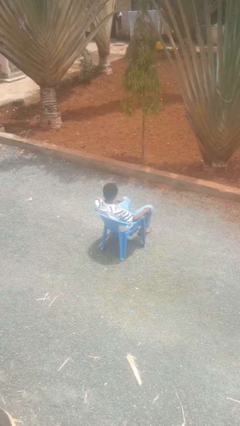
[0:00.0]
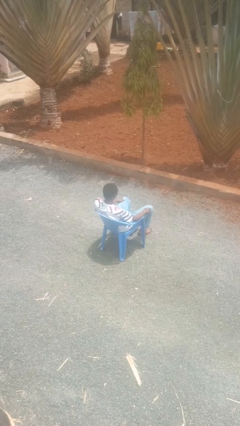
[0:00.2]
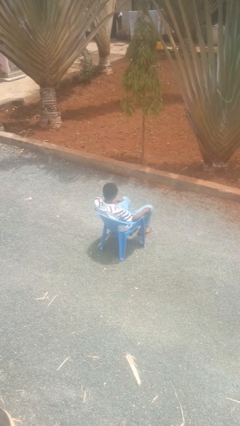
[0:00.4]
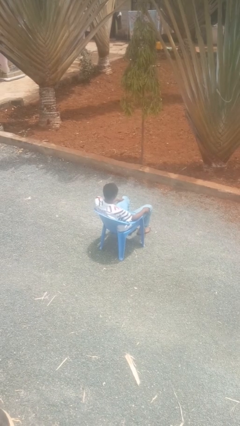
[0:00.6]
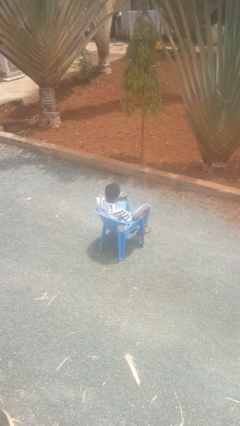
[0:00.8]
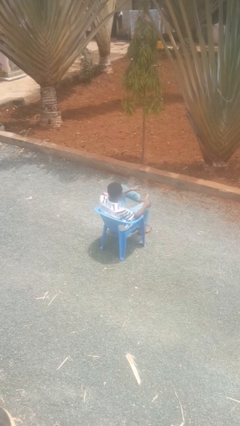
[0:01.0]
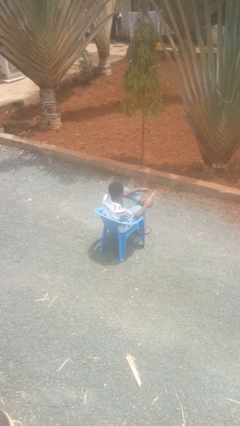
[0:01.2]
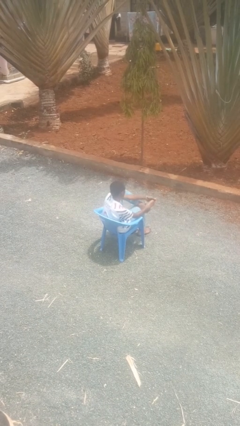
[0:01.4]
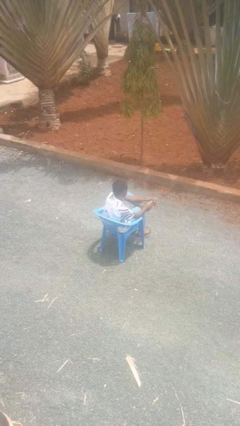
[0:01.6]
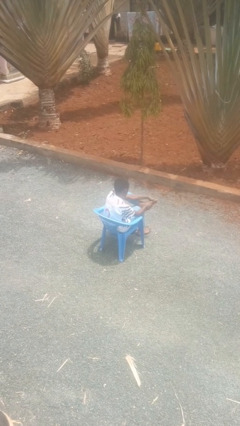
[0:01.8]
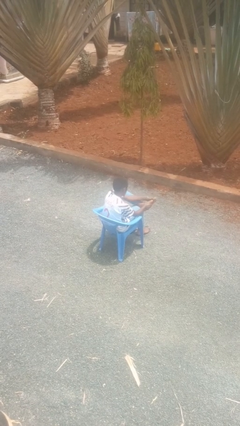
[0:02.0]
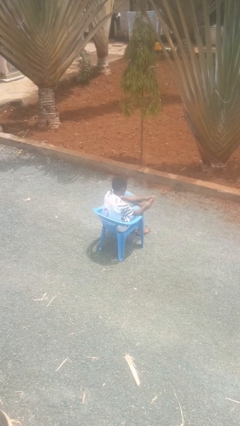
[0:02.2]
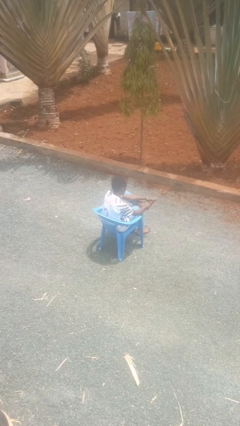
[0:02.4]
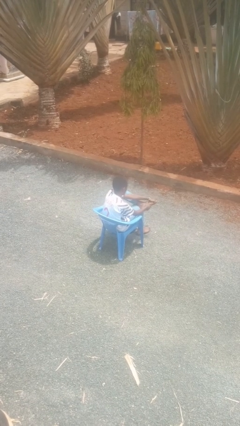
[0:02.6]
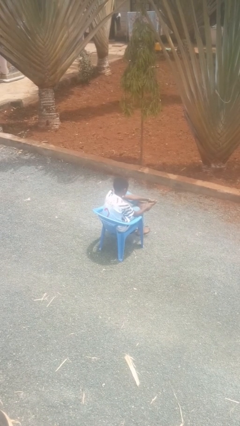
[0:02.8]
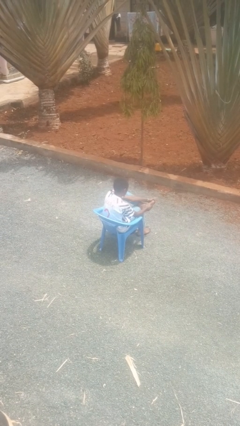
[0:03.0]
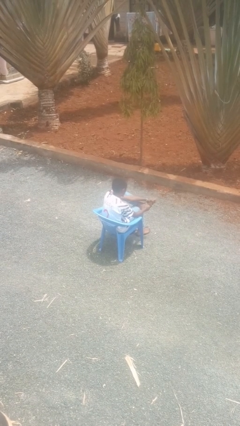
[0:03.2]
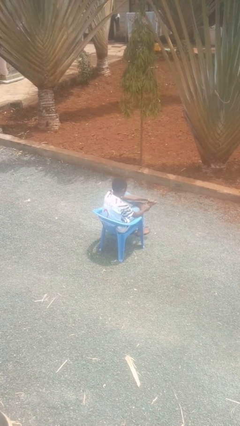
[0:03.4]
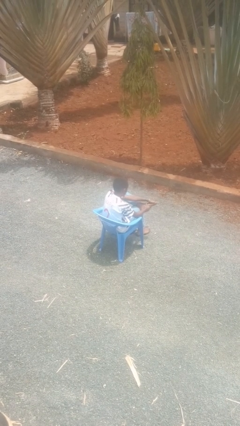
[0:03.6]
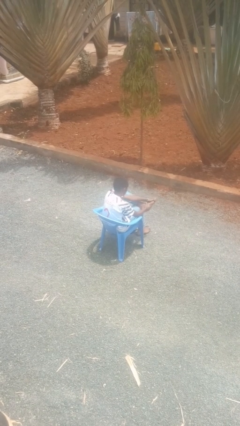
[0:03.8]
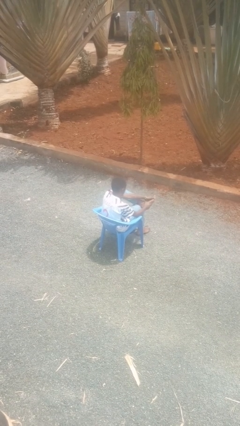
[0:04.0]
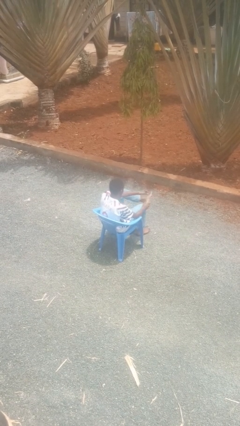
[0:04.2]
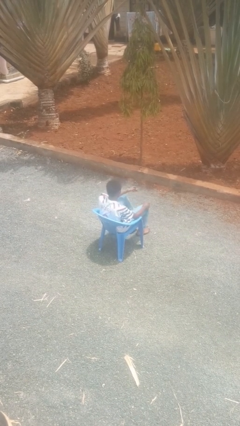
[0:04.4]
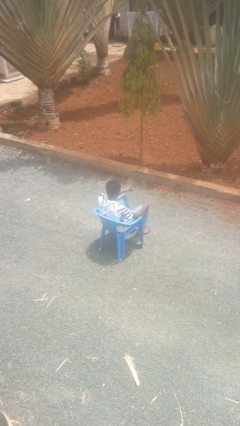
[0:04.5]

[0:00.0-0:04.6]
person rubs foot

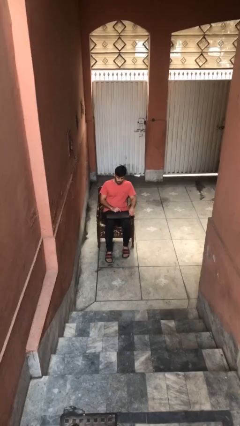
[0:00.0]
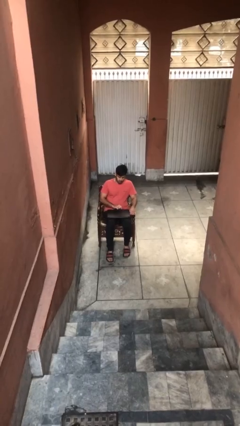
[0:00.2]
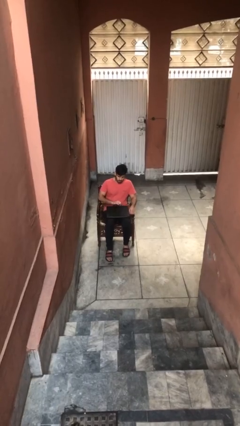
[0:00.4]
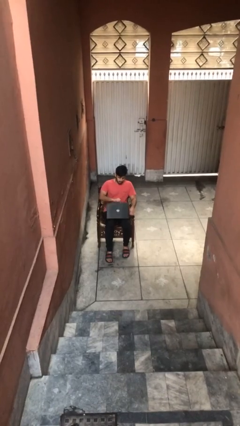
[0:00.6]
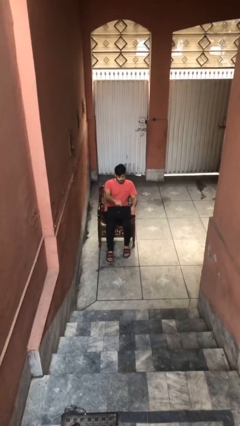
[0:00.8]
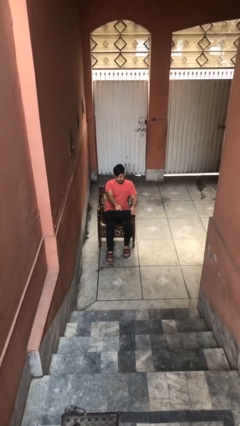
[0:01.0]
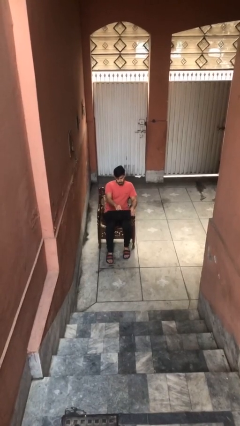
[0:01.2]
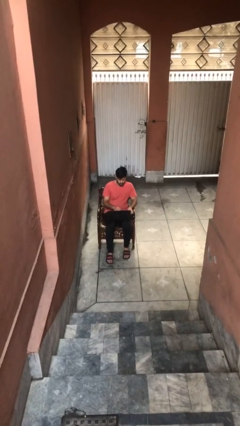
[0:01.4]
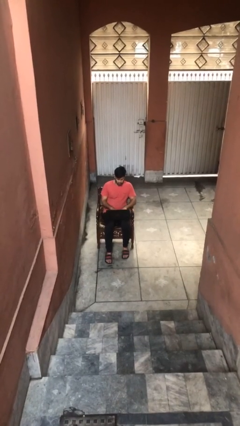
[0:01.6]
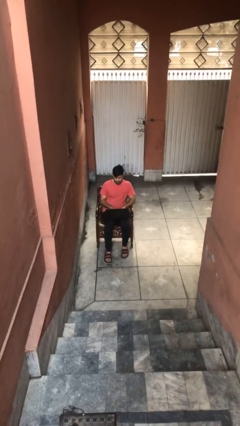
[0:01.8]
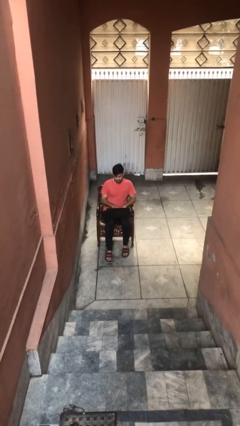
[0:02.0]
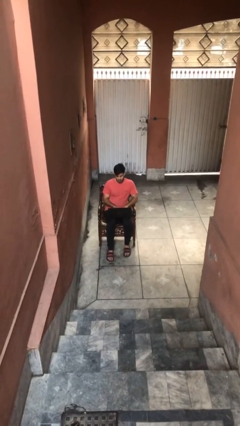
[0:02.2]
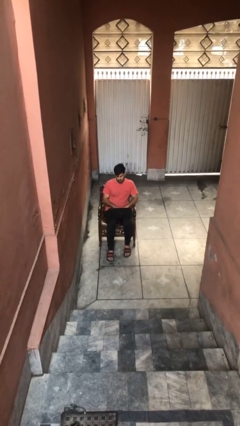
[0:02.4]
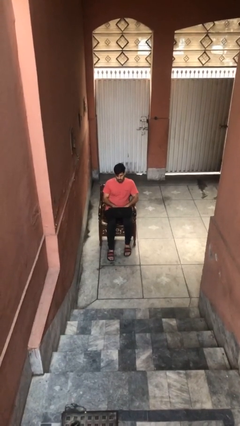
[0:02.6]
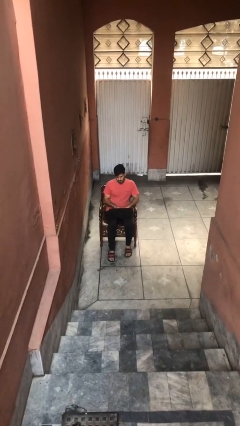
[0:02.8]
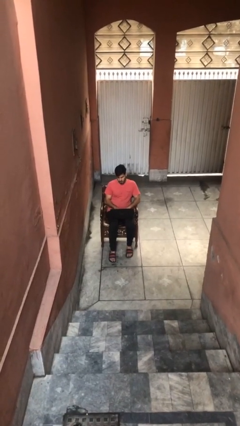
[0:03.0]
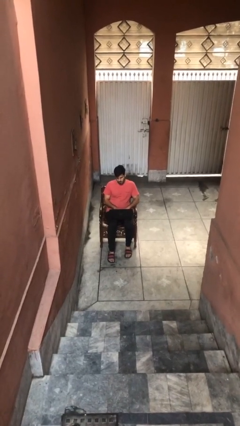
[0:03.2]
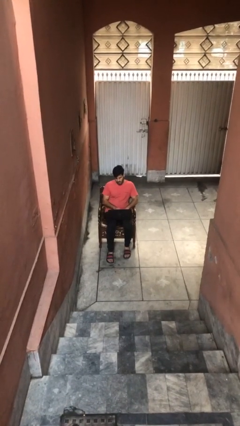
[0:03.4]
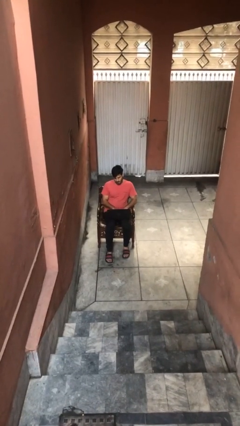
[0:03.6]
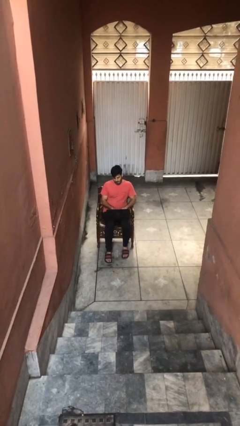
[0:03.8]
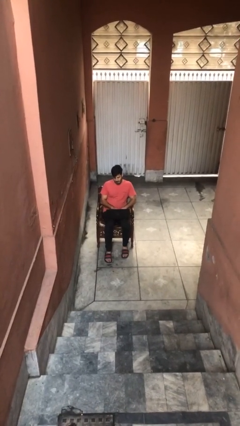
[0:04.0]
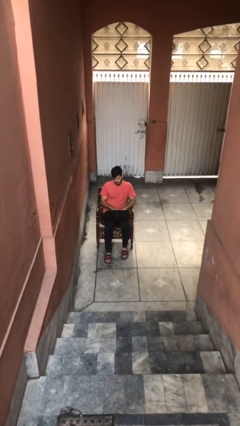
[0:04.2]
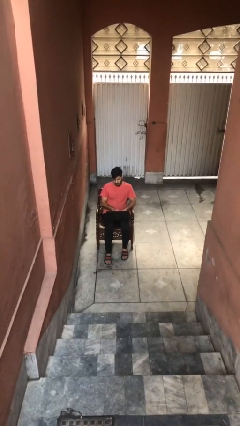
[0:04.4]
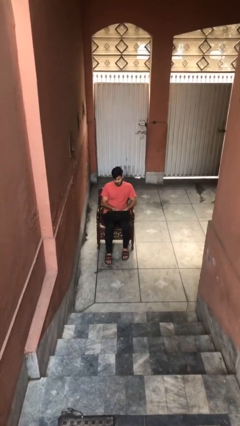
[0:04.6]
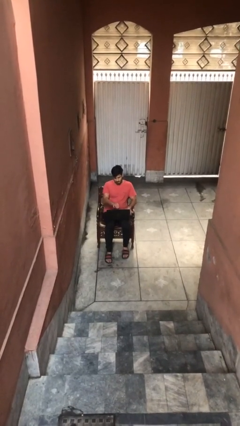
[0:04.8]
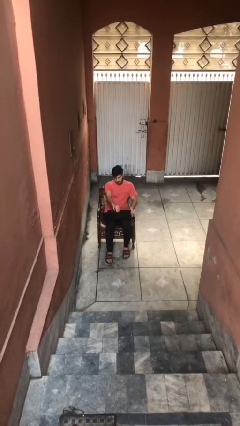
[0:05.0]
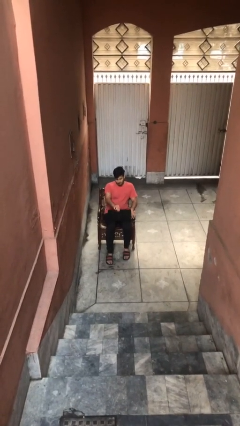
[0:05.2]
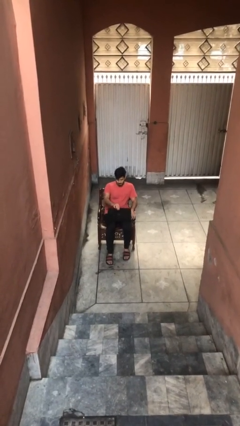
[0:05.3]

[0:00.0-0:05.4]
person interacts with laptop

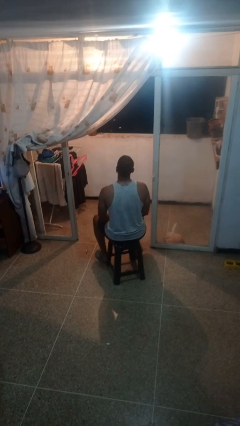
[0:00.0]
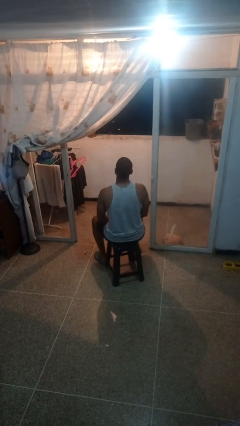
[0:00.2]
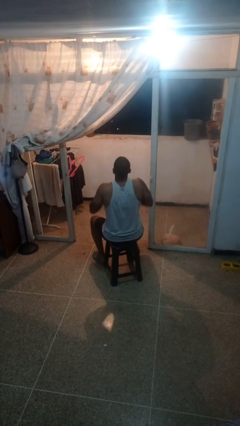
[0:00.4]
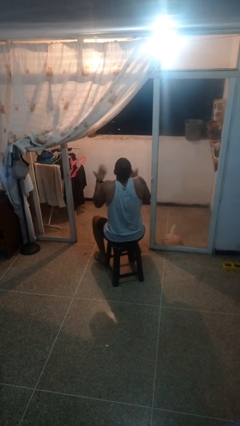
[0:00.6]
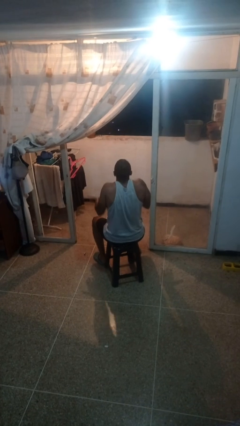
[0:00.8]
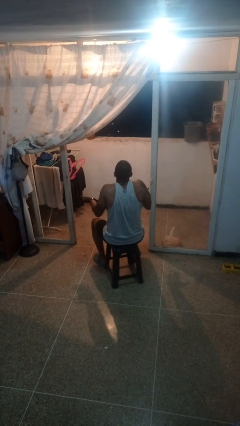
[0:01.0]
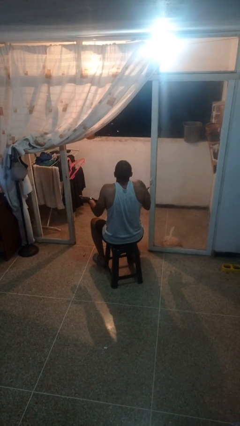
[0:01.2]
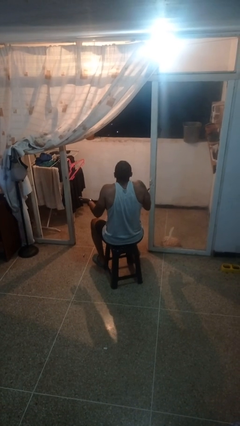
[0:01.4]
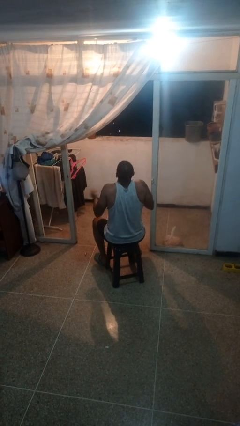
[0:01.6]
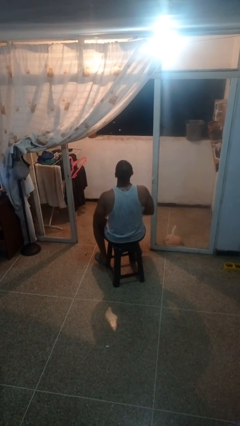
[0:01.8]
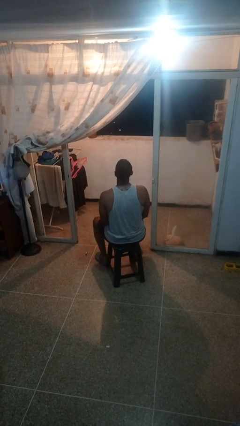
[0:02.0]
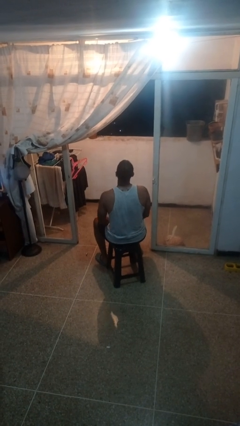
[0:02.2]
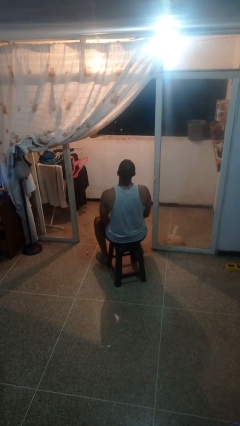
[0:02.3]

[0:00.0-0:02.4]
person shrugs

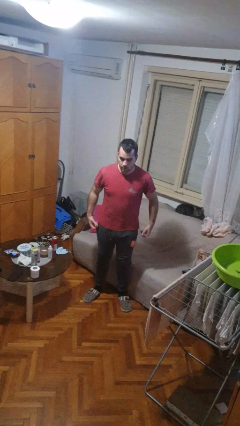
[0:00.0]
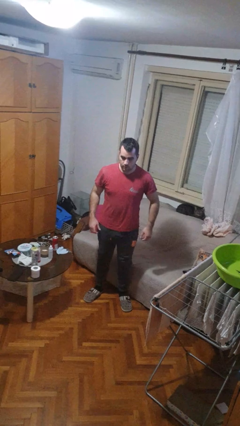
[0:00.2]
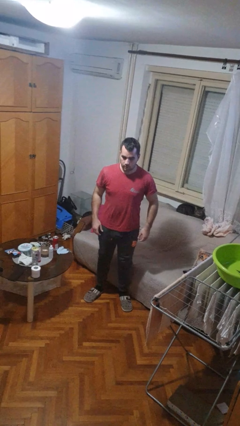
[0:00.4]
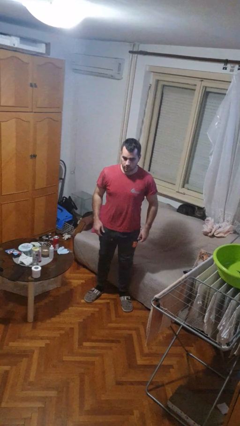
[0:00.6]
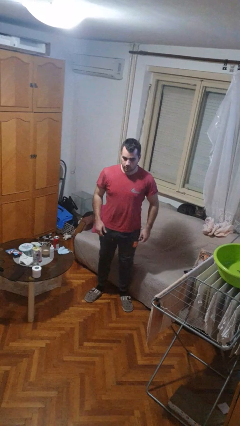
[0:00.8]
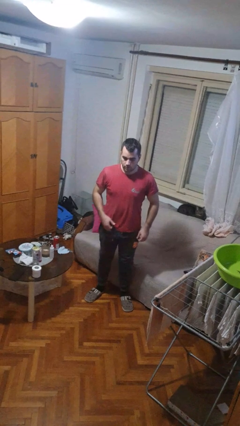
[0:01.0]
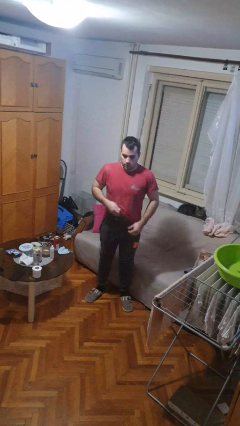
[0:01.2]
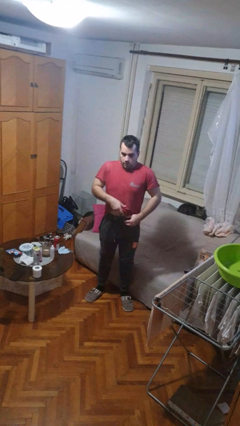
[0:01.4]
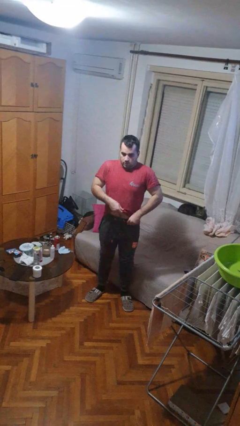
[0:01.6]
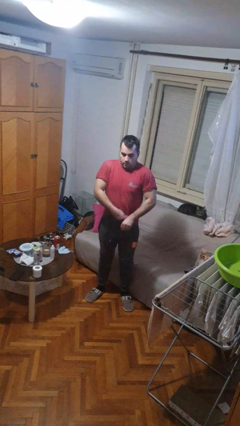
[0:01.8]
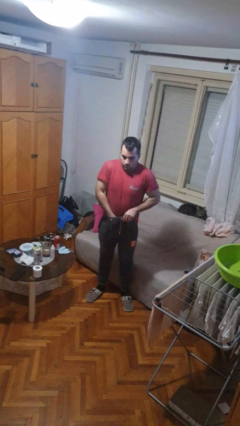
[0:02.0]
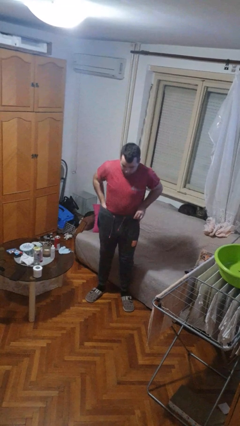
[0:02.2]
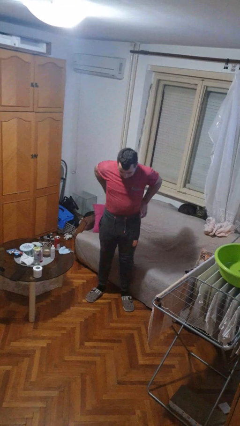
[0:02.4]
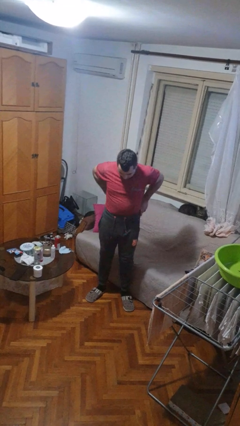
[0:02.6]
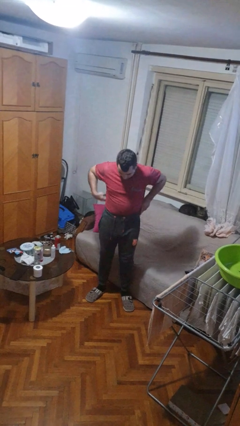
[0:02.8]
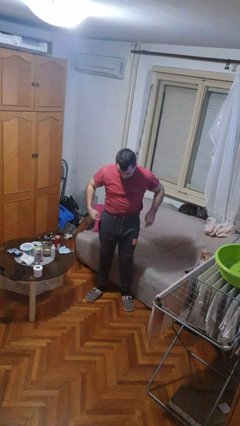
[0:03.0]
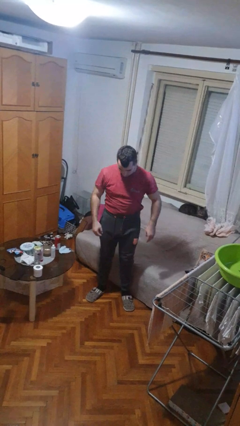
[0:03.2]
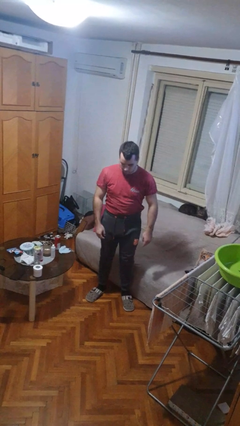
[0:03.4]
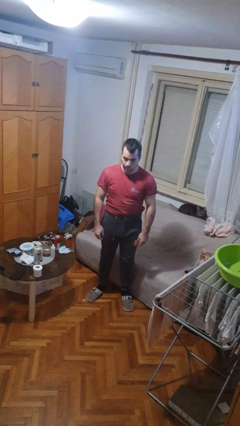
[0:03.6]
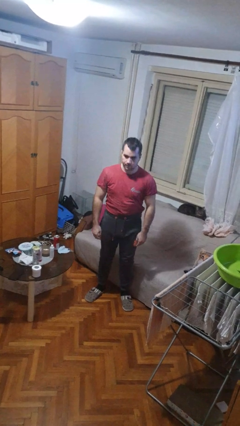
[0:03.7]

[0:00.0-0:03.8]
person tucks in shirt

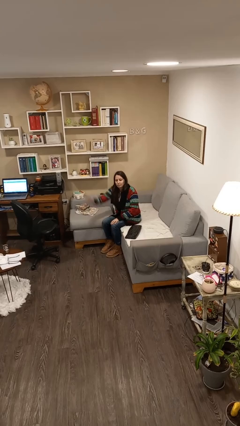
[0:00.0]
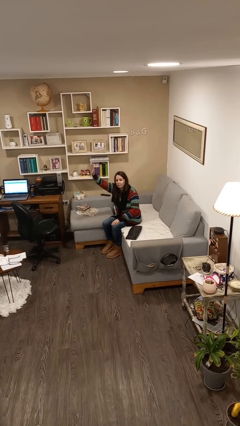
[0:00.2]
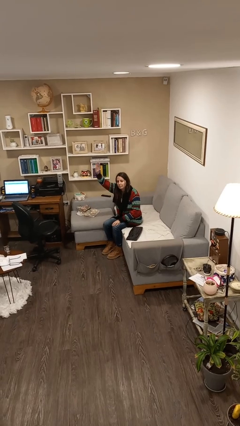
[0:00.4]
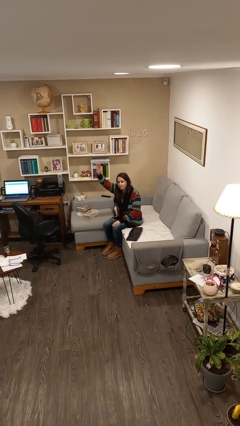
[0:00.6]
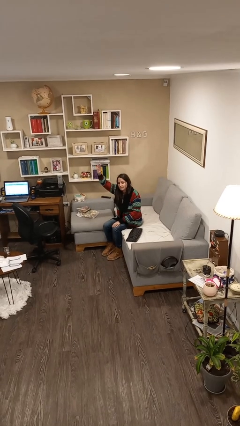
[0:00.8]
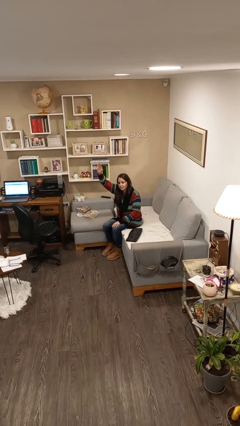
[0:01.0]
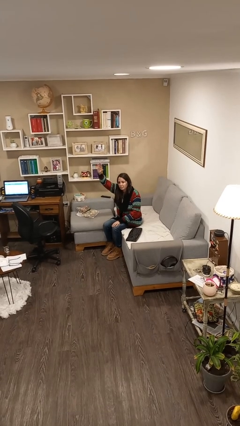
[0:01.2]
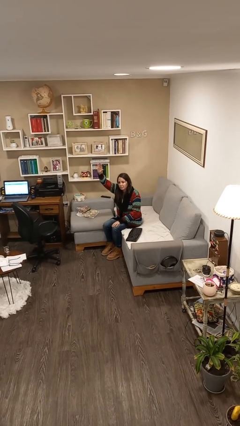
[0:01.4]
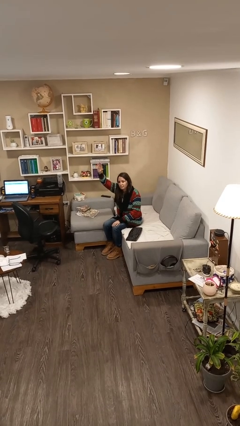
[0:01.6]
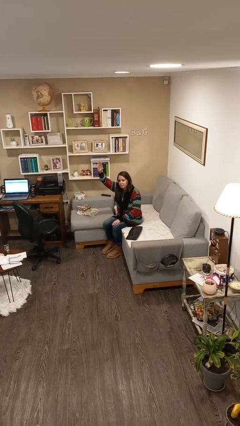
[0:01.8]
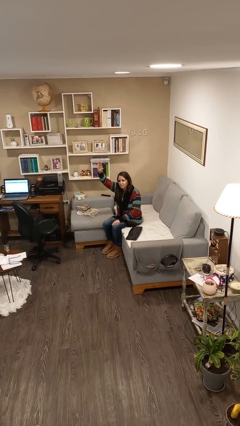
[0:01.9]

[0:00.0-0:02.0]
person gestures raise hand
